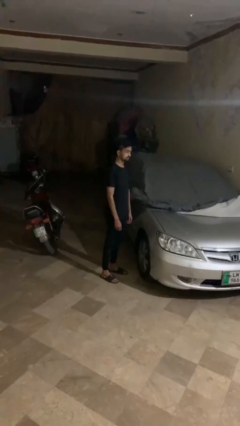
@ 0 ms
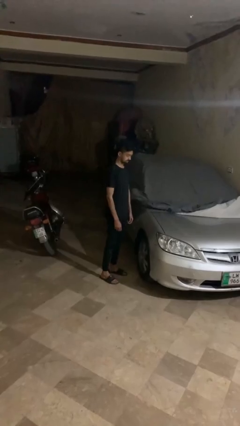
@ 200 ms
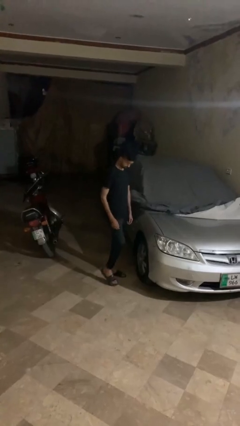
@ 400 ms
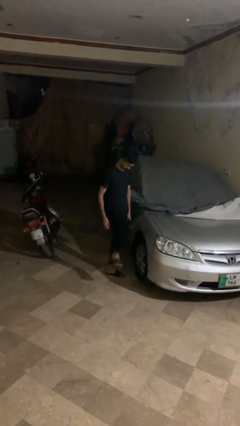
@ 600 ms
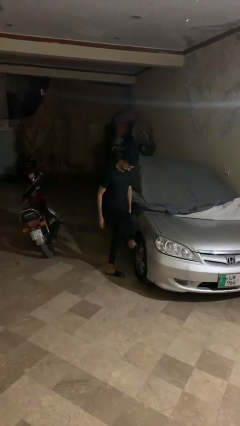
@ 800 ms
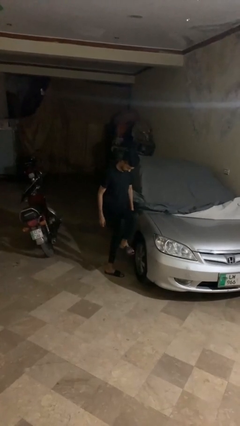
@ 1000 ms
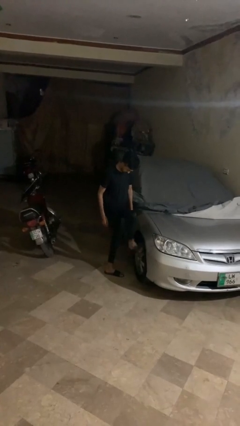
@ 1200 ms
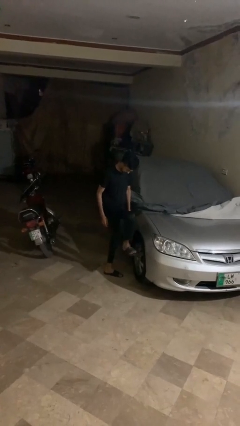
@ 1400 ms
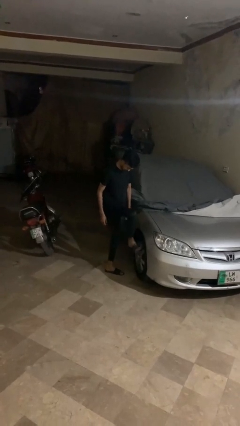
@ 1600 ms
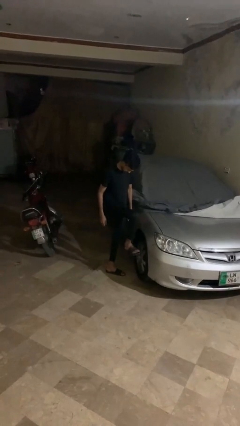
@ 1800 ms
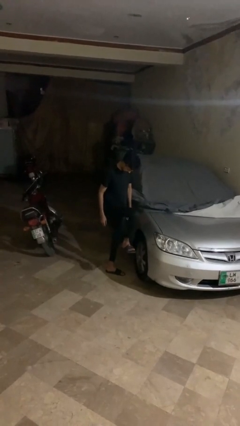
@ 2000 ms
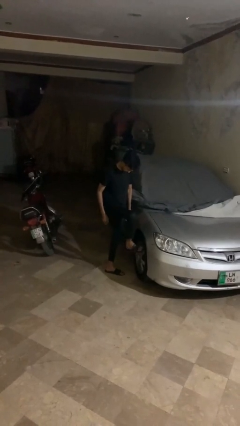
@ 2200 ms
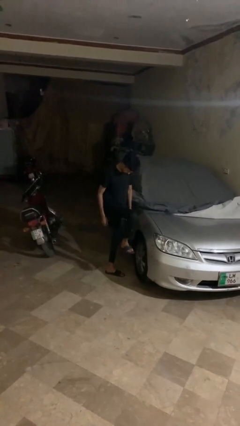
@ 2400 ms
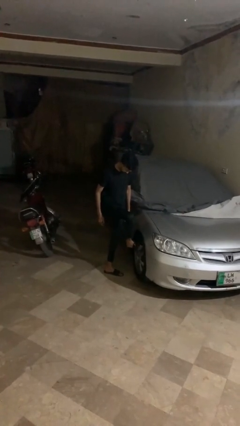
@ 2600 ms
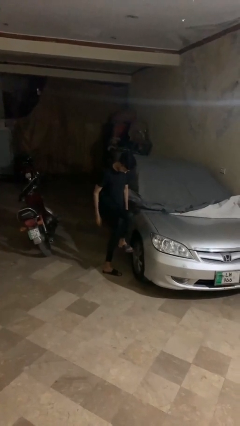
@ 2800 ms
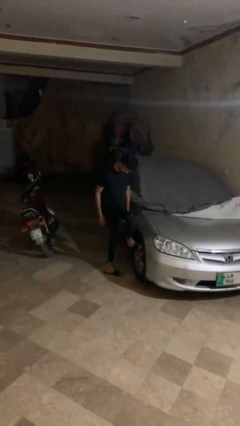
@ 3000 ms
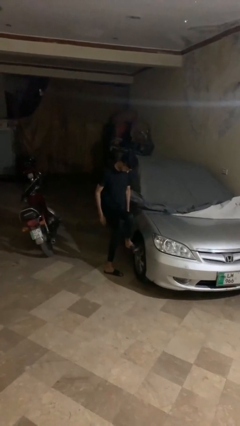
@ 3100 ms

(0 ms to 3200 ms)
person kicks car tires

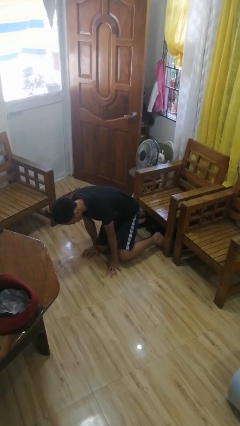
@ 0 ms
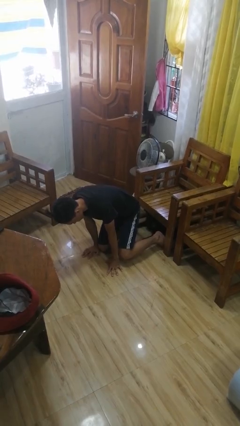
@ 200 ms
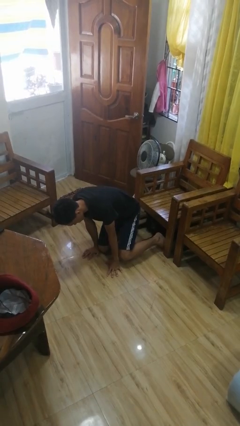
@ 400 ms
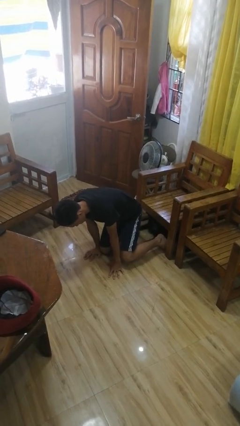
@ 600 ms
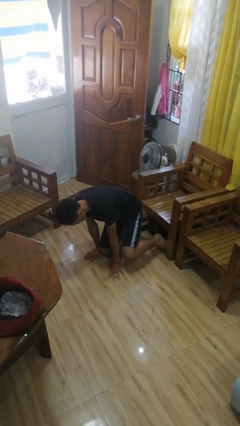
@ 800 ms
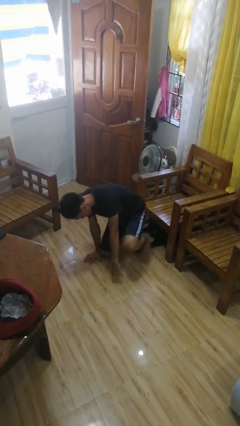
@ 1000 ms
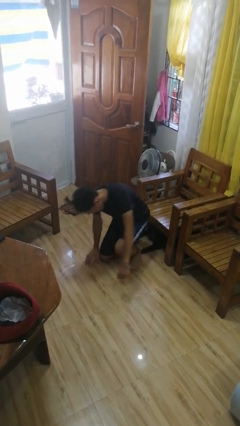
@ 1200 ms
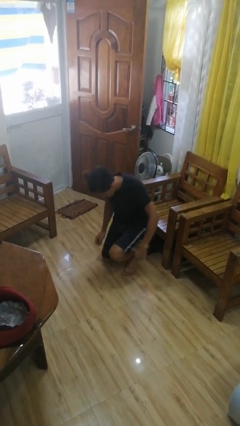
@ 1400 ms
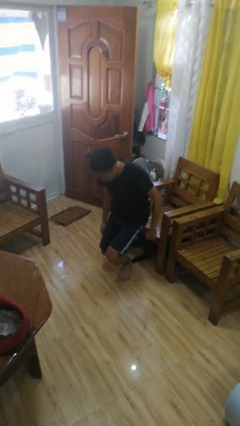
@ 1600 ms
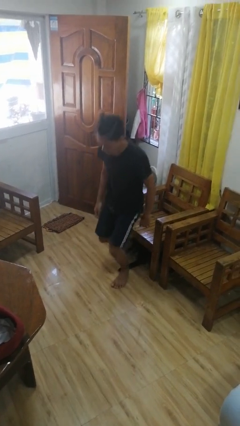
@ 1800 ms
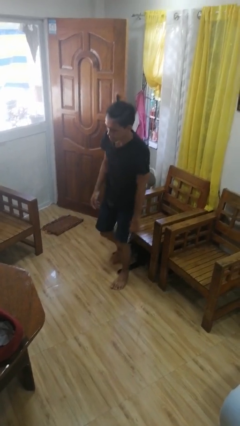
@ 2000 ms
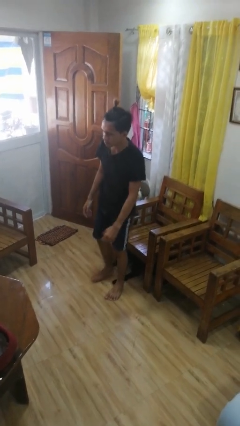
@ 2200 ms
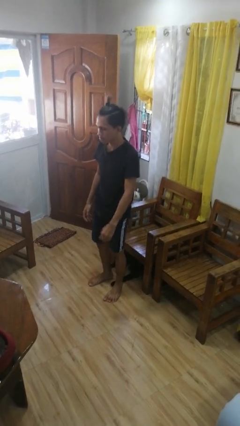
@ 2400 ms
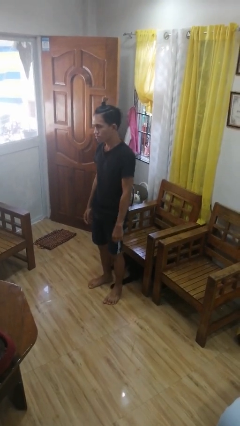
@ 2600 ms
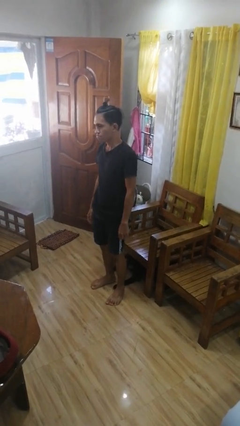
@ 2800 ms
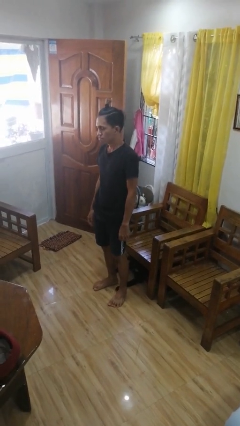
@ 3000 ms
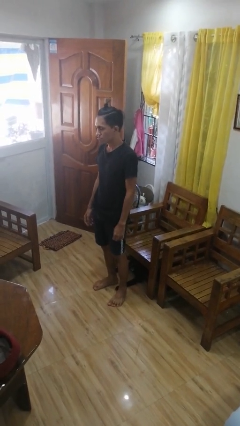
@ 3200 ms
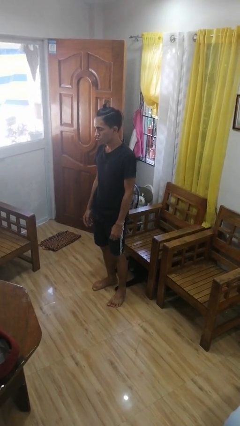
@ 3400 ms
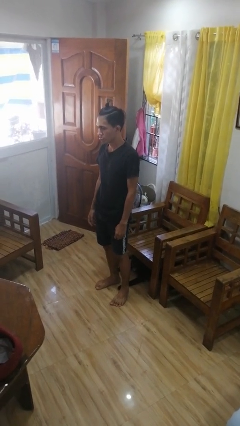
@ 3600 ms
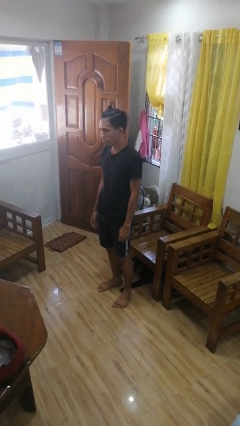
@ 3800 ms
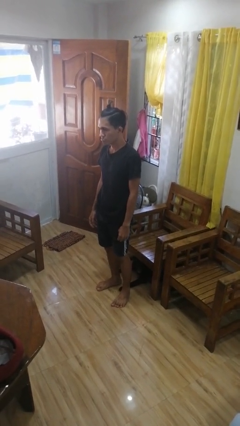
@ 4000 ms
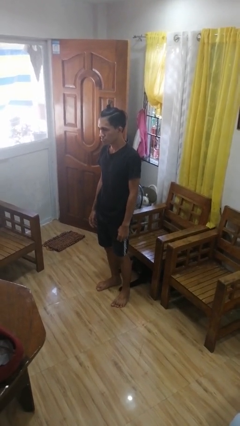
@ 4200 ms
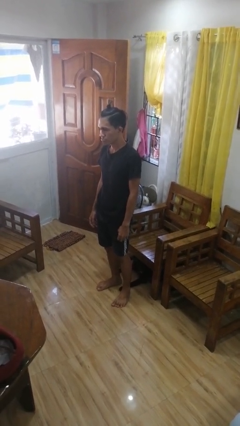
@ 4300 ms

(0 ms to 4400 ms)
person stands up from floor

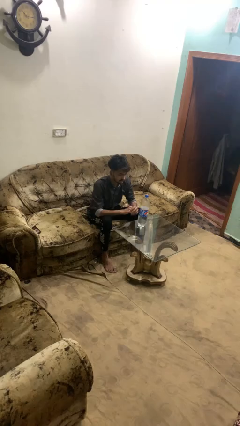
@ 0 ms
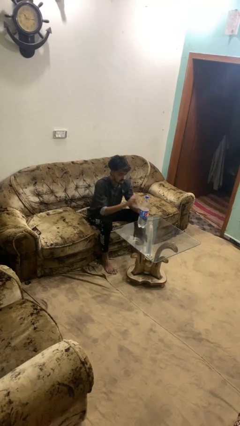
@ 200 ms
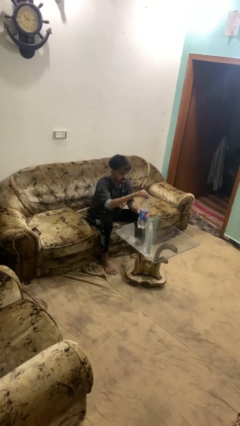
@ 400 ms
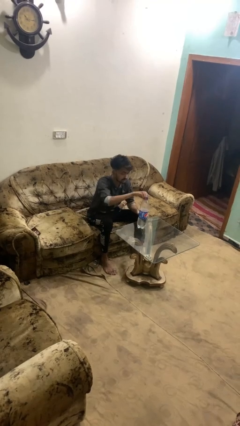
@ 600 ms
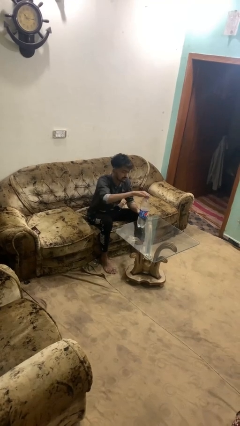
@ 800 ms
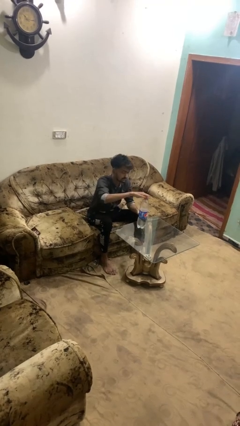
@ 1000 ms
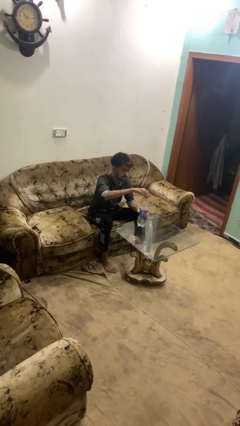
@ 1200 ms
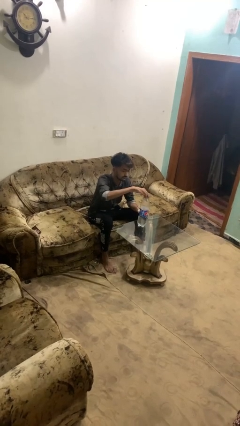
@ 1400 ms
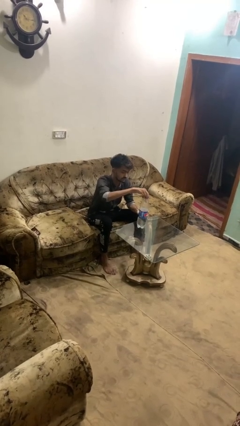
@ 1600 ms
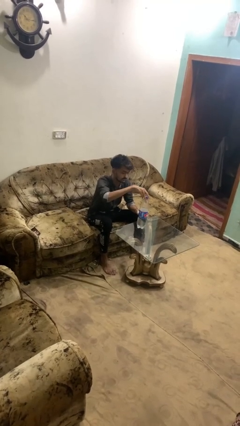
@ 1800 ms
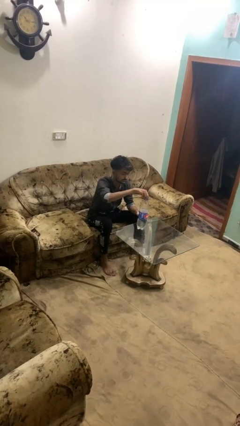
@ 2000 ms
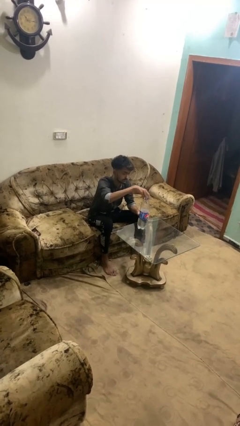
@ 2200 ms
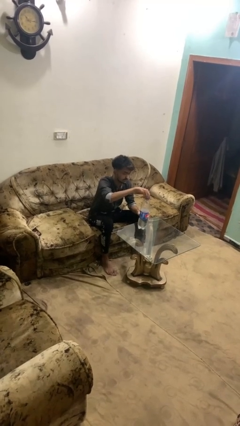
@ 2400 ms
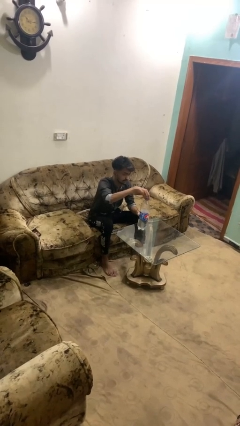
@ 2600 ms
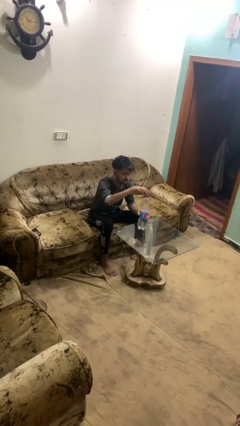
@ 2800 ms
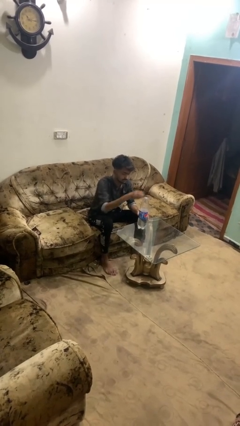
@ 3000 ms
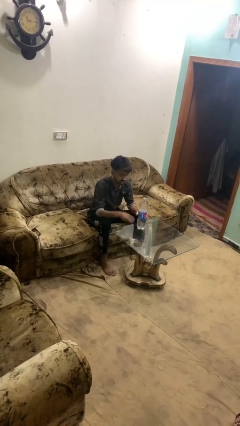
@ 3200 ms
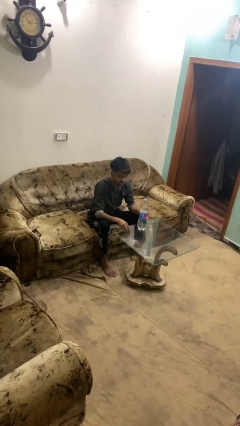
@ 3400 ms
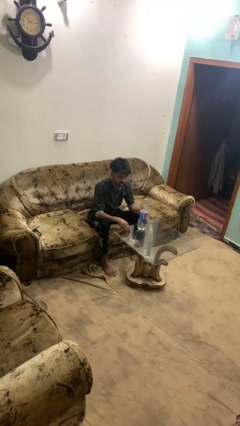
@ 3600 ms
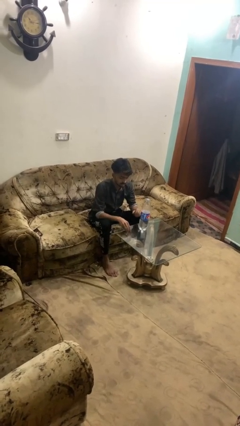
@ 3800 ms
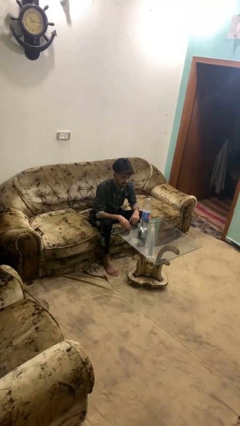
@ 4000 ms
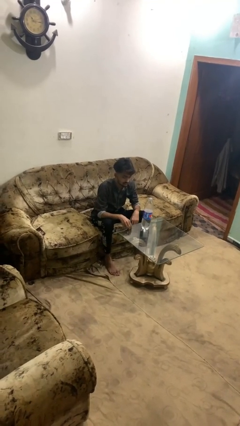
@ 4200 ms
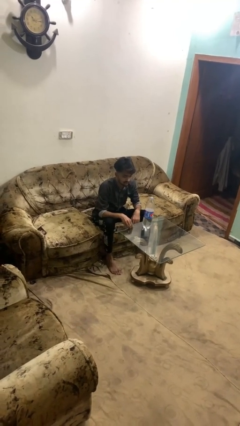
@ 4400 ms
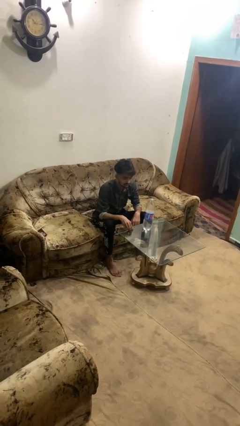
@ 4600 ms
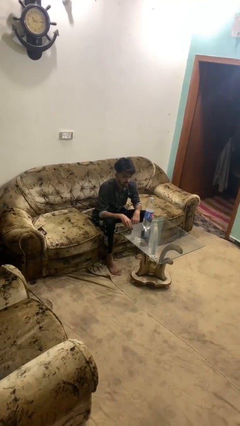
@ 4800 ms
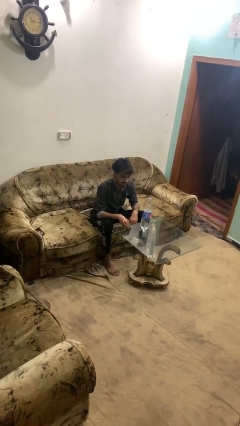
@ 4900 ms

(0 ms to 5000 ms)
person unscrews lid from bottle

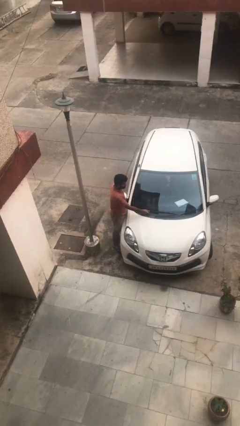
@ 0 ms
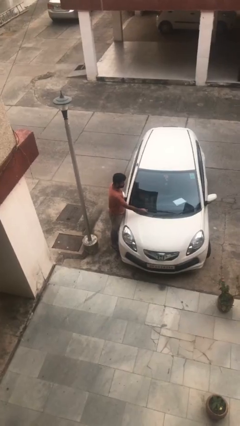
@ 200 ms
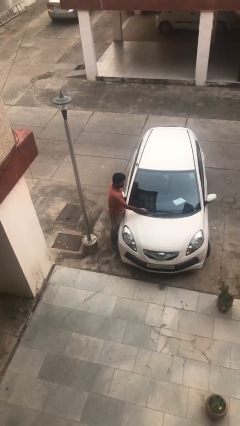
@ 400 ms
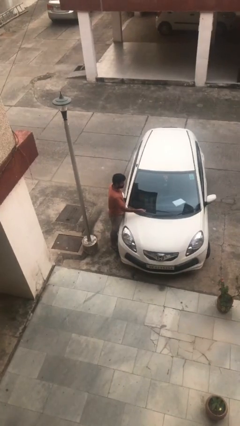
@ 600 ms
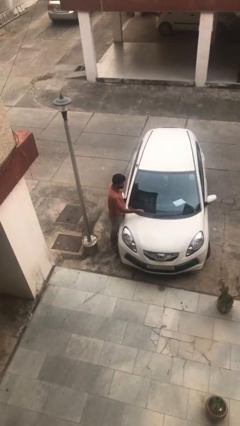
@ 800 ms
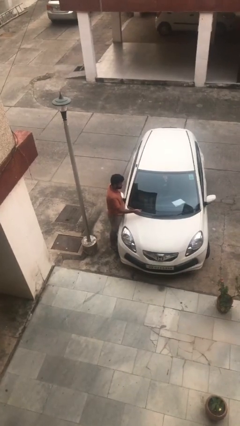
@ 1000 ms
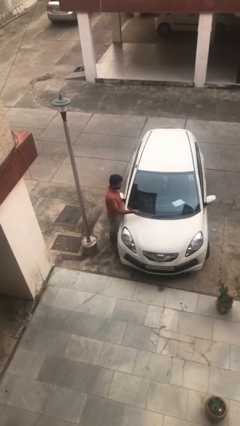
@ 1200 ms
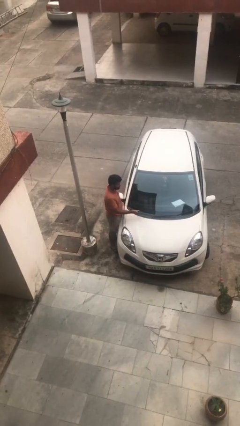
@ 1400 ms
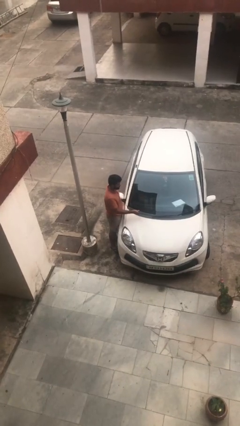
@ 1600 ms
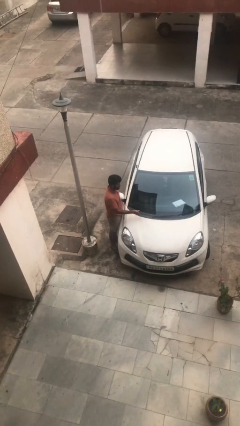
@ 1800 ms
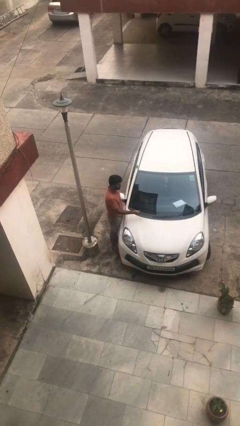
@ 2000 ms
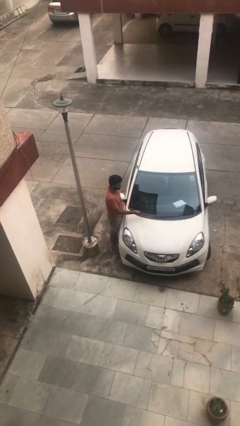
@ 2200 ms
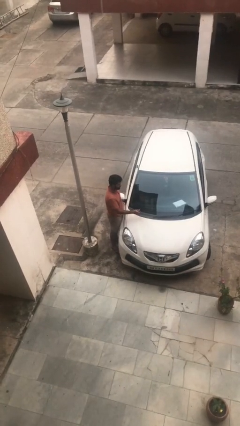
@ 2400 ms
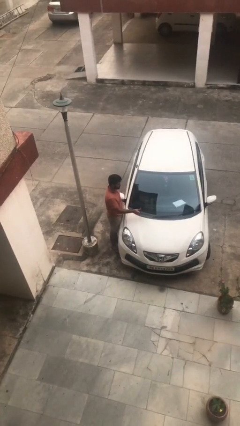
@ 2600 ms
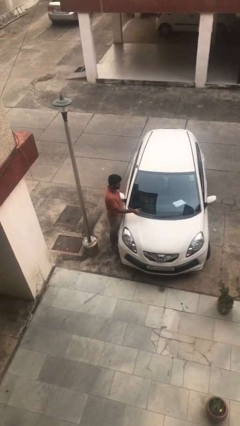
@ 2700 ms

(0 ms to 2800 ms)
person flips up car wipers

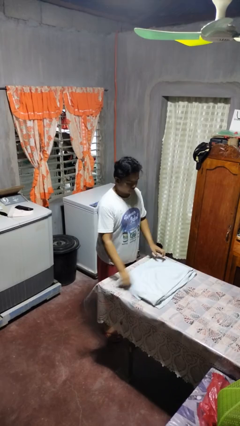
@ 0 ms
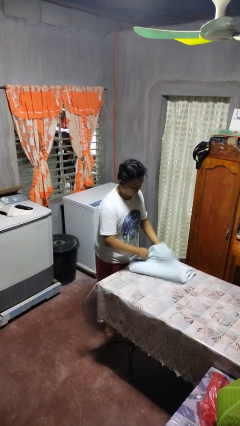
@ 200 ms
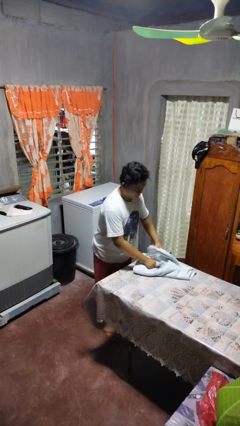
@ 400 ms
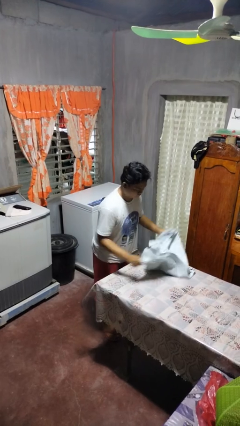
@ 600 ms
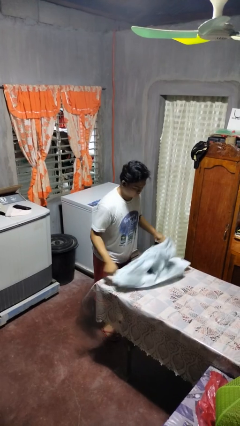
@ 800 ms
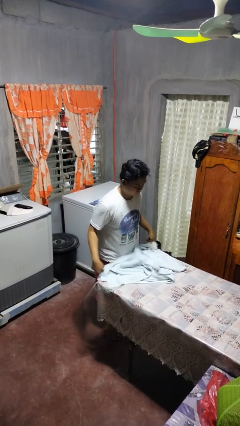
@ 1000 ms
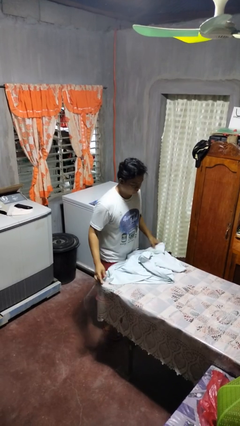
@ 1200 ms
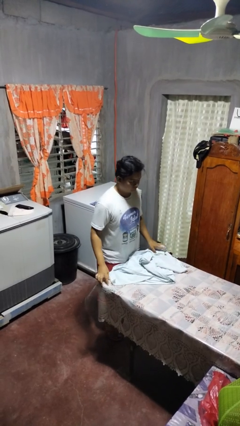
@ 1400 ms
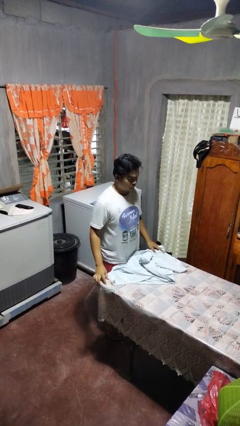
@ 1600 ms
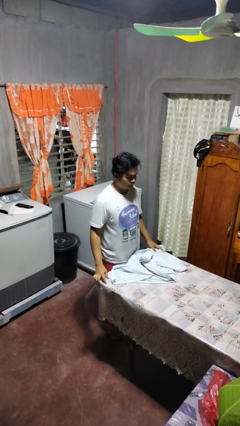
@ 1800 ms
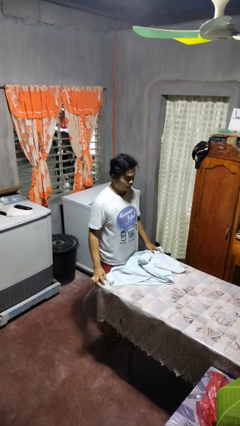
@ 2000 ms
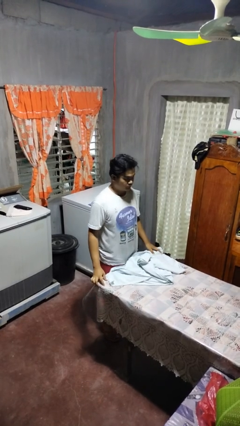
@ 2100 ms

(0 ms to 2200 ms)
person unfolds blanket

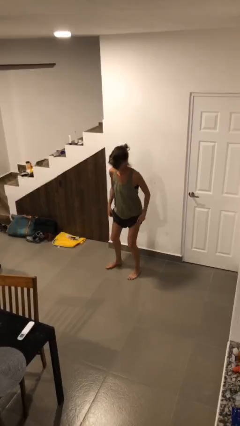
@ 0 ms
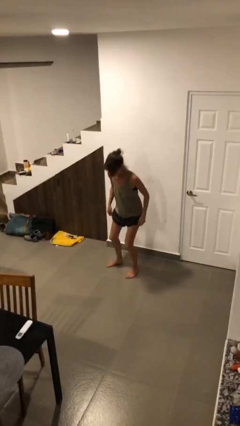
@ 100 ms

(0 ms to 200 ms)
person sits down
